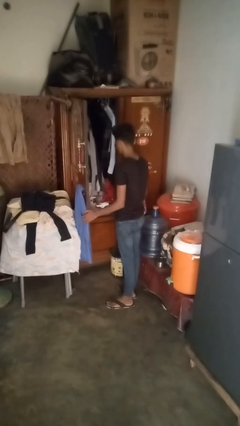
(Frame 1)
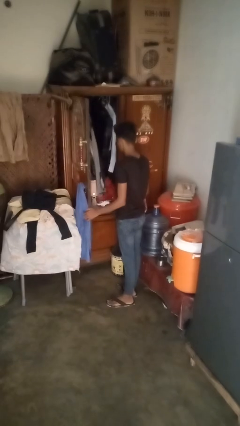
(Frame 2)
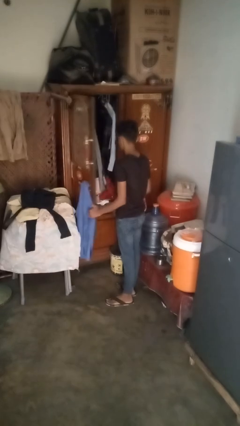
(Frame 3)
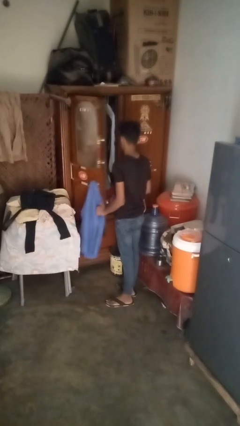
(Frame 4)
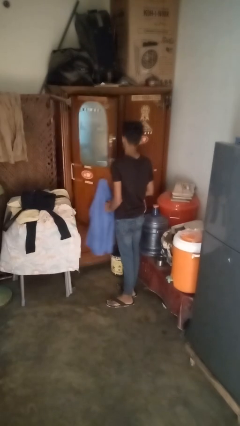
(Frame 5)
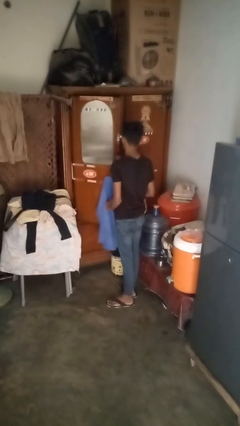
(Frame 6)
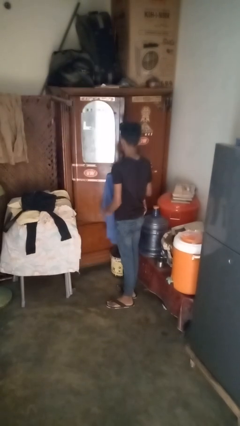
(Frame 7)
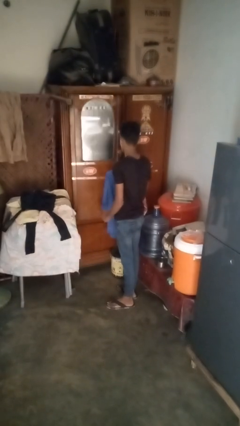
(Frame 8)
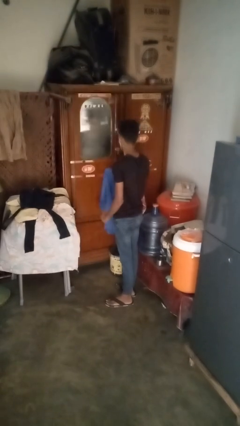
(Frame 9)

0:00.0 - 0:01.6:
person closes dresser drawer

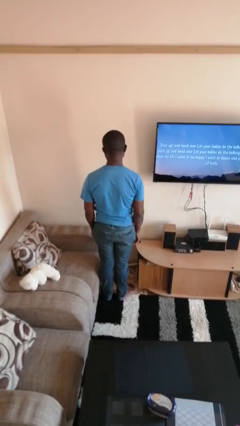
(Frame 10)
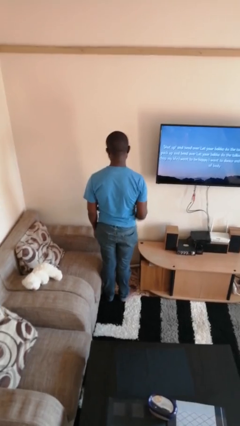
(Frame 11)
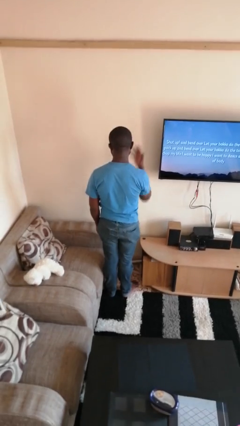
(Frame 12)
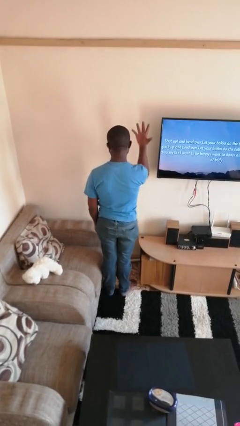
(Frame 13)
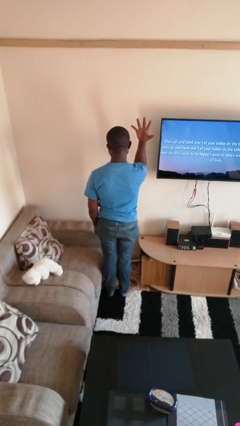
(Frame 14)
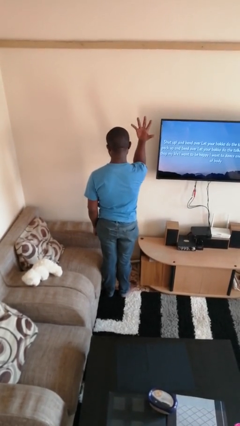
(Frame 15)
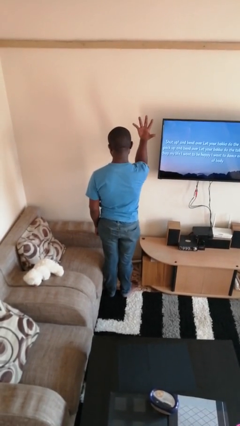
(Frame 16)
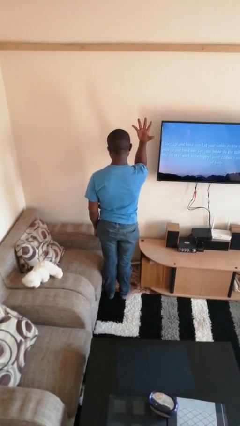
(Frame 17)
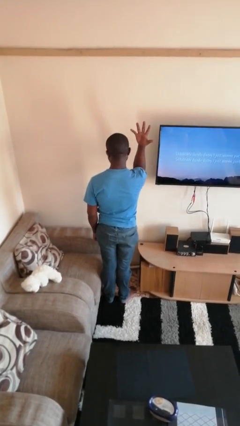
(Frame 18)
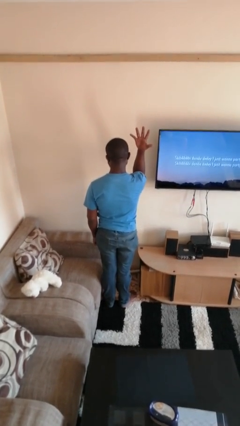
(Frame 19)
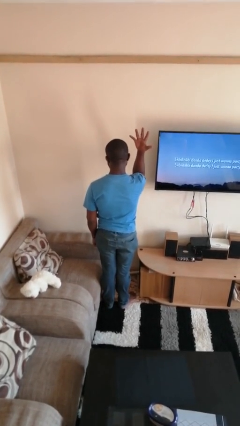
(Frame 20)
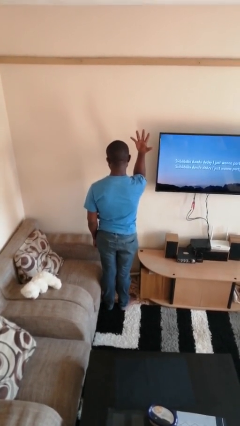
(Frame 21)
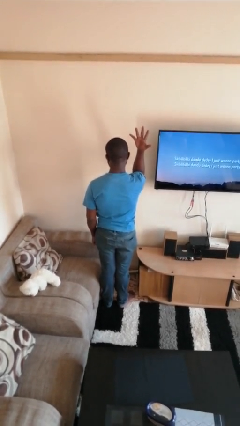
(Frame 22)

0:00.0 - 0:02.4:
person gestures number five

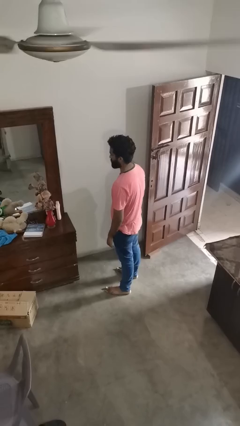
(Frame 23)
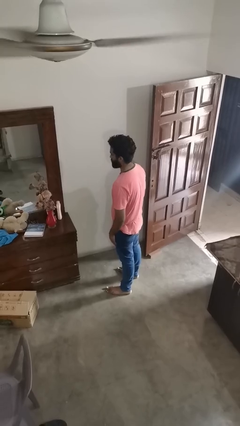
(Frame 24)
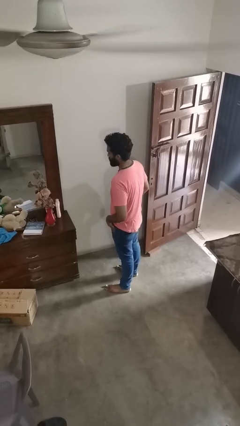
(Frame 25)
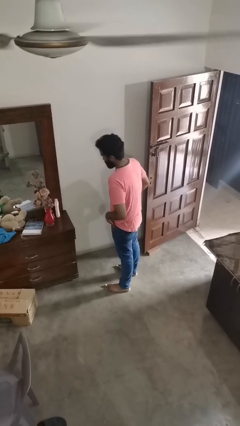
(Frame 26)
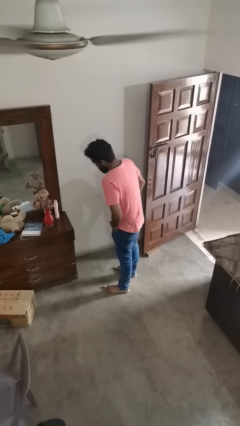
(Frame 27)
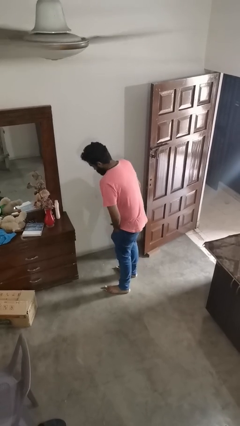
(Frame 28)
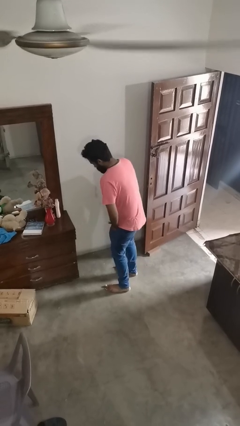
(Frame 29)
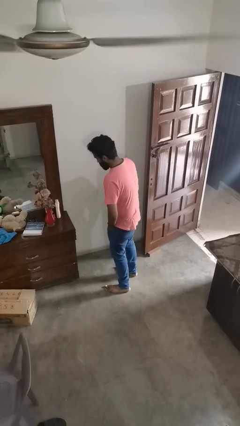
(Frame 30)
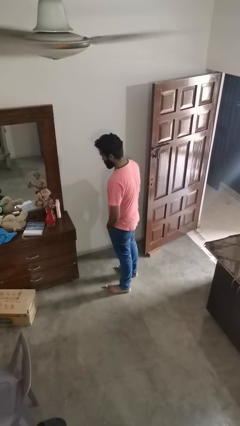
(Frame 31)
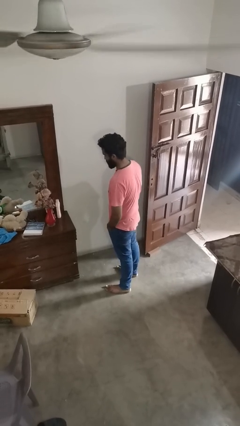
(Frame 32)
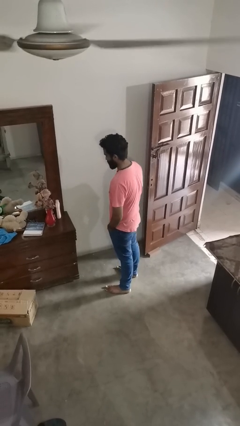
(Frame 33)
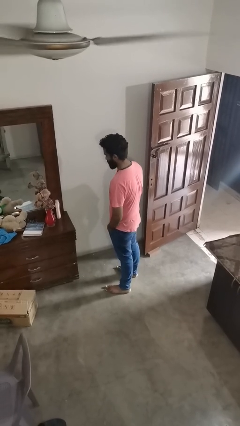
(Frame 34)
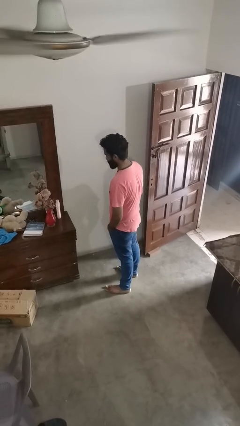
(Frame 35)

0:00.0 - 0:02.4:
person puts hands in back pockets

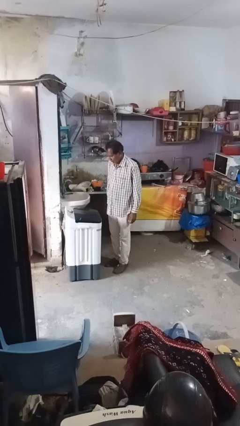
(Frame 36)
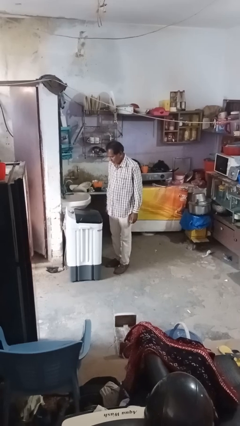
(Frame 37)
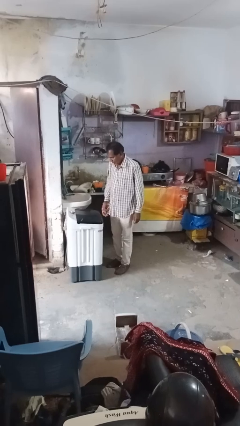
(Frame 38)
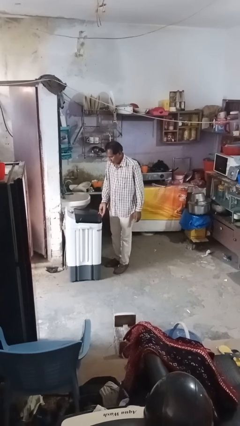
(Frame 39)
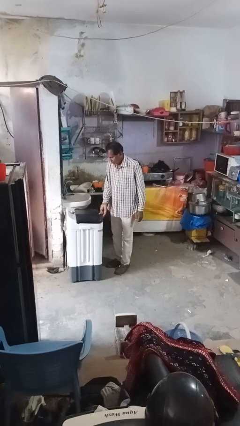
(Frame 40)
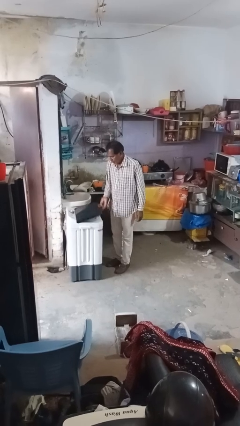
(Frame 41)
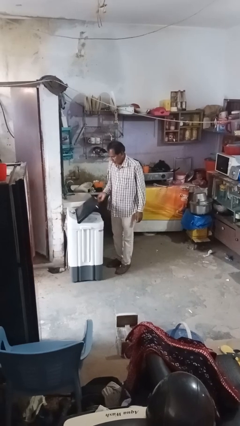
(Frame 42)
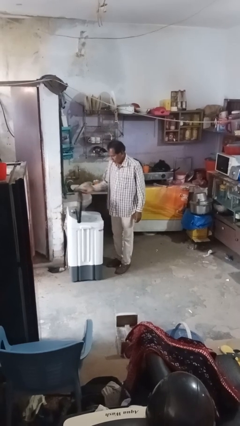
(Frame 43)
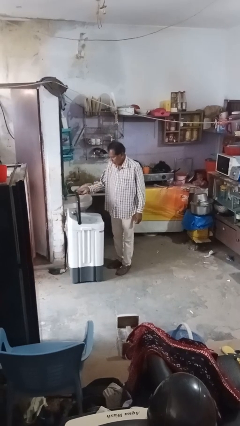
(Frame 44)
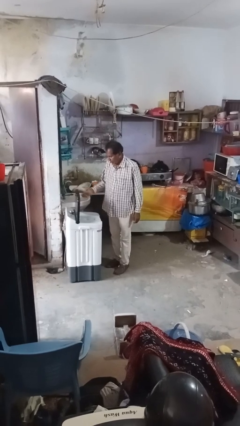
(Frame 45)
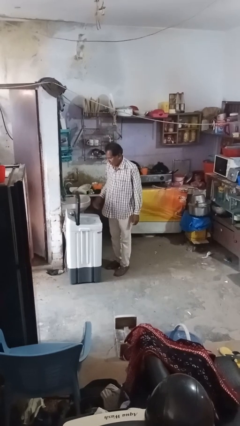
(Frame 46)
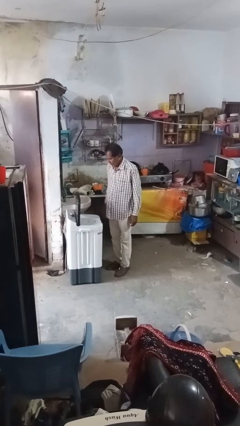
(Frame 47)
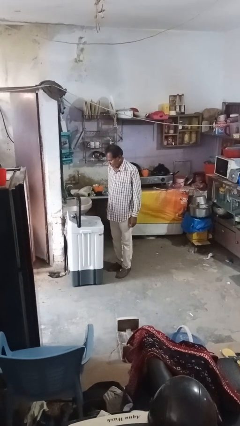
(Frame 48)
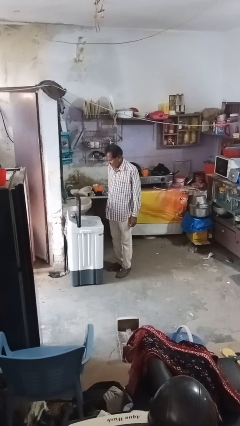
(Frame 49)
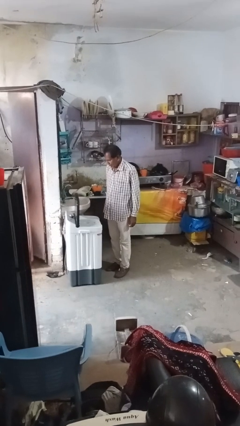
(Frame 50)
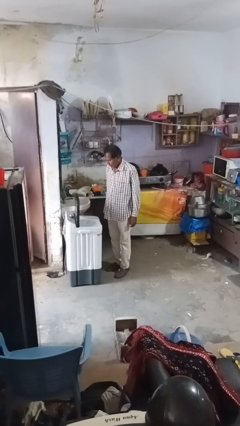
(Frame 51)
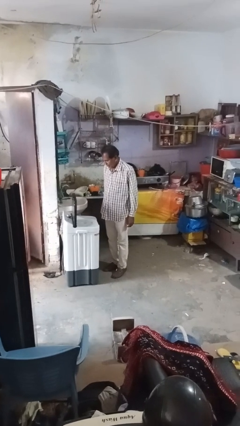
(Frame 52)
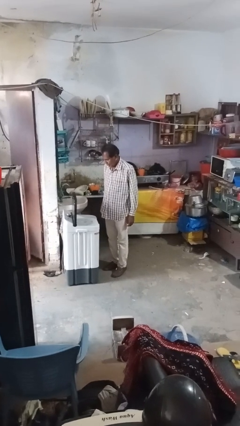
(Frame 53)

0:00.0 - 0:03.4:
person opens clothes washer

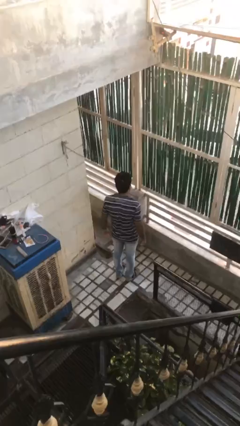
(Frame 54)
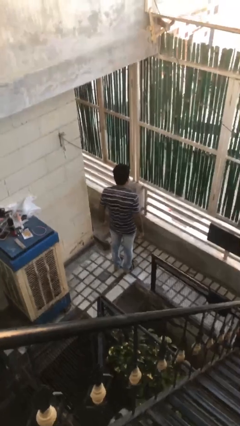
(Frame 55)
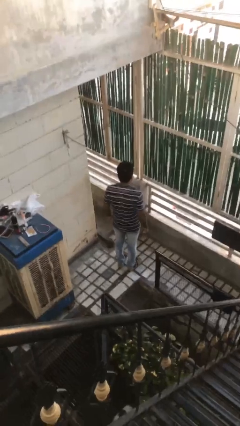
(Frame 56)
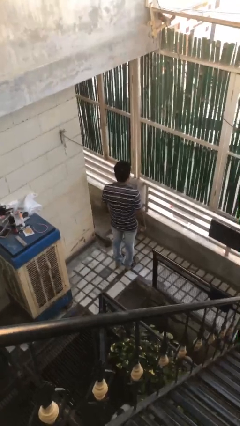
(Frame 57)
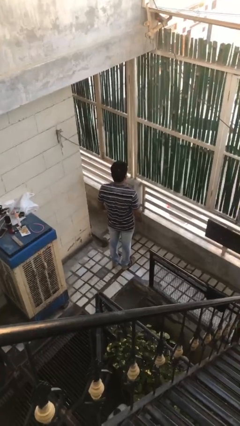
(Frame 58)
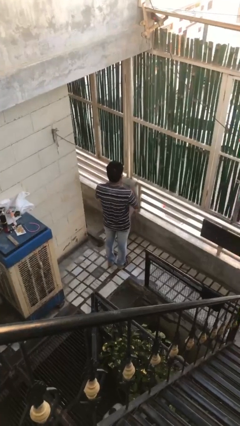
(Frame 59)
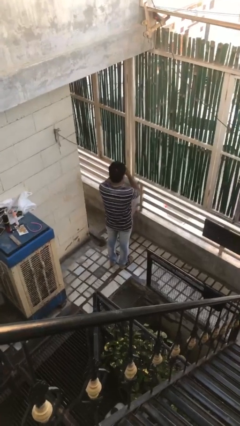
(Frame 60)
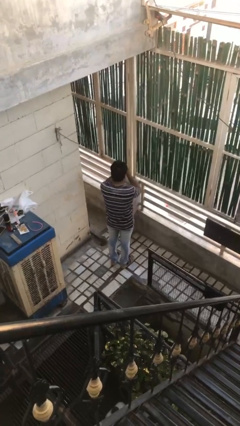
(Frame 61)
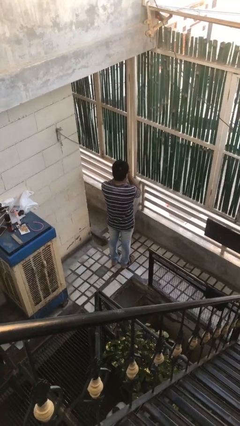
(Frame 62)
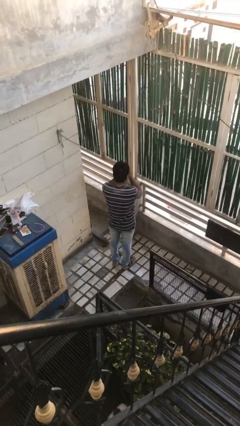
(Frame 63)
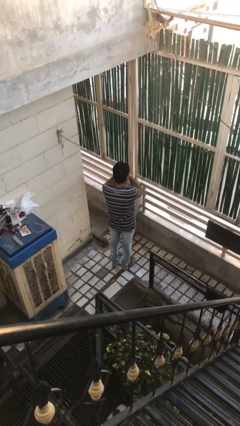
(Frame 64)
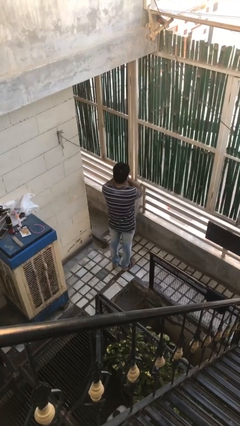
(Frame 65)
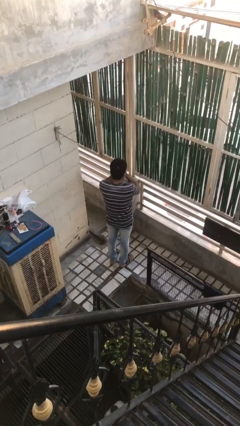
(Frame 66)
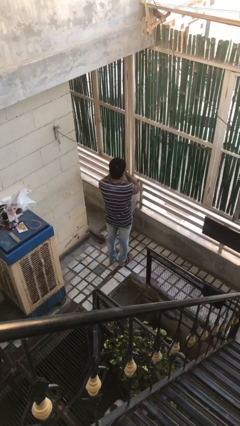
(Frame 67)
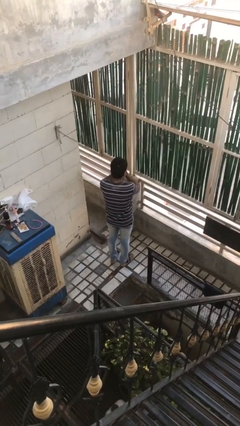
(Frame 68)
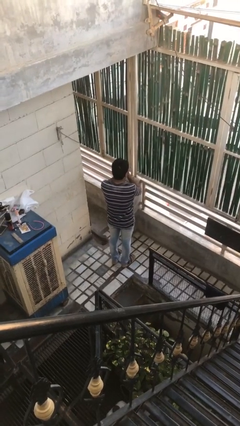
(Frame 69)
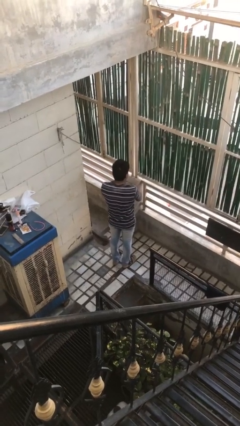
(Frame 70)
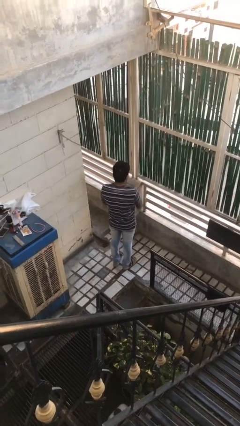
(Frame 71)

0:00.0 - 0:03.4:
person snaps fingers

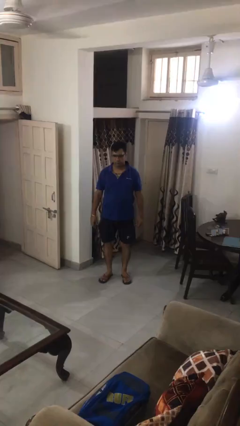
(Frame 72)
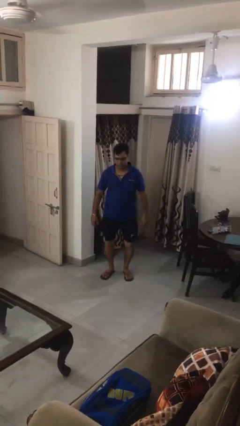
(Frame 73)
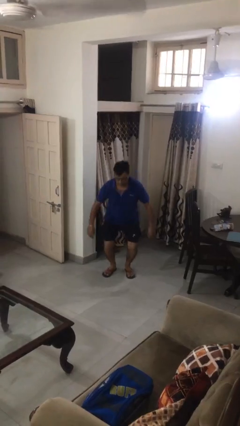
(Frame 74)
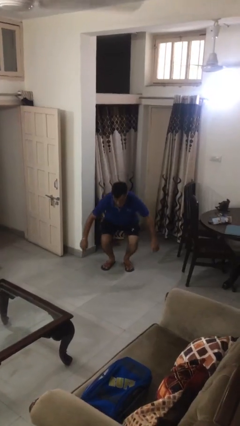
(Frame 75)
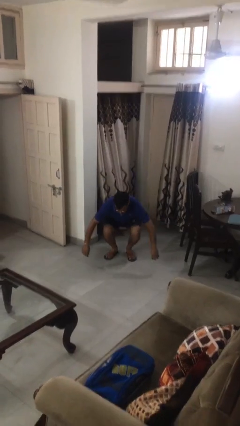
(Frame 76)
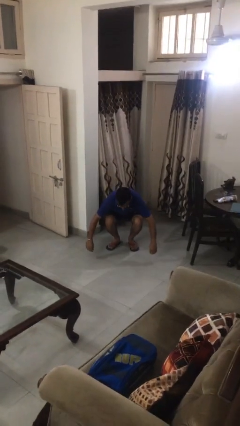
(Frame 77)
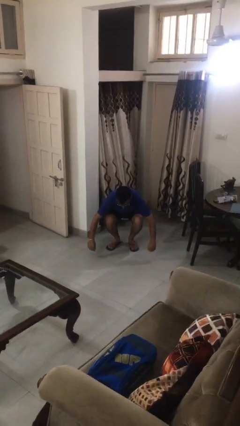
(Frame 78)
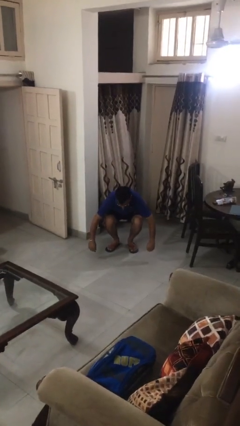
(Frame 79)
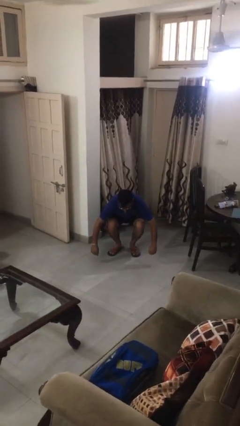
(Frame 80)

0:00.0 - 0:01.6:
person squats

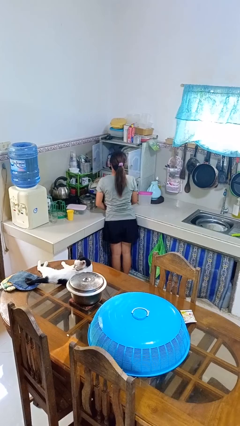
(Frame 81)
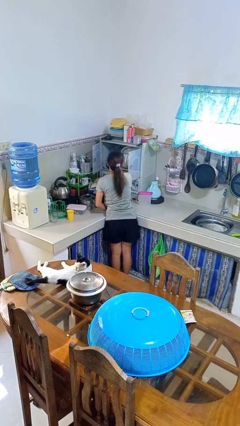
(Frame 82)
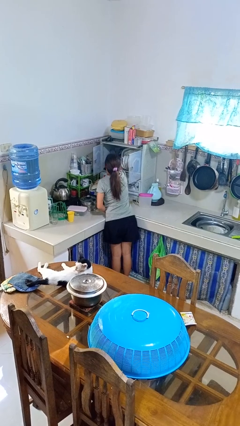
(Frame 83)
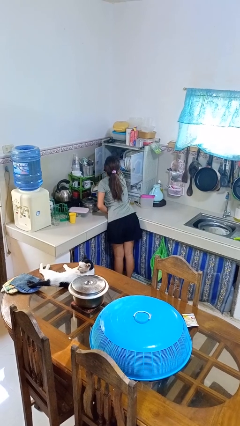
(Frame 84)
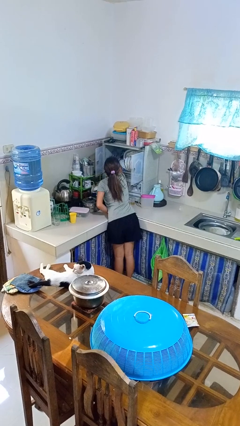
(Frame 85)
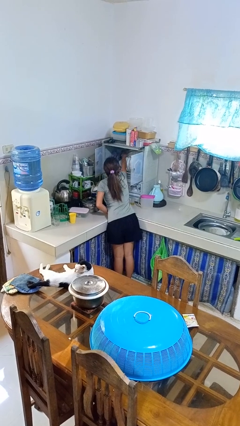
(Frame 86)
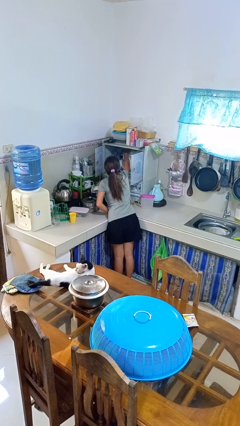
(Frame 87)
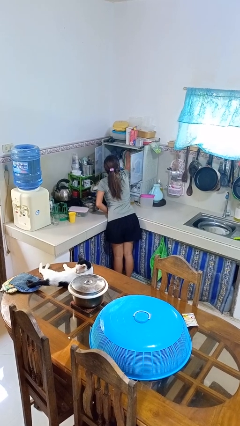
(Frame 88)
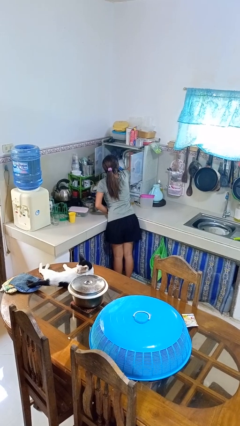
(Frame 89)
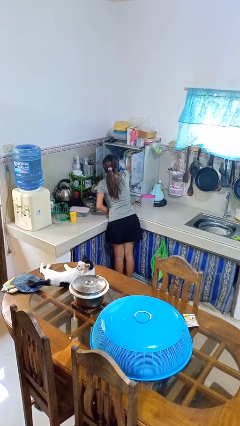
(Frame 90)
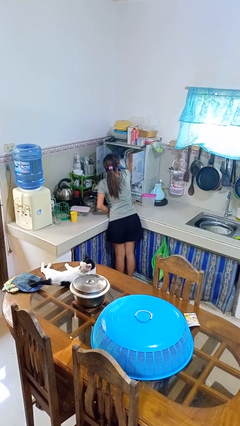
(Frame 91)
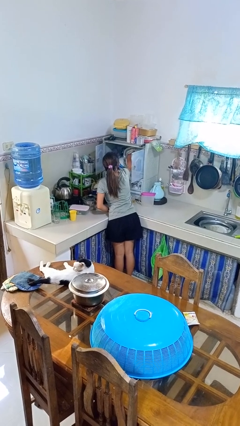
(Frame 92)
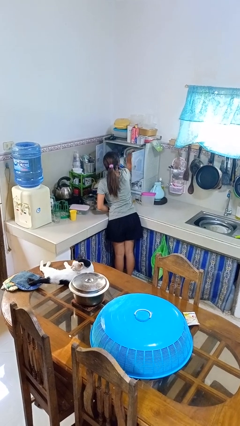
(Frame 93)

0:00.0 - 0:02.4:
person searches in kitchen drawer
